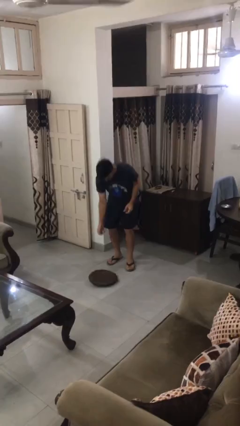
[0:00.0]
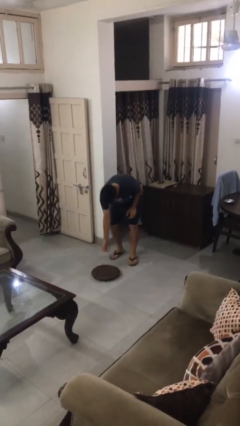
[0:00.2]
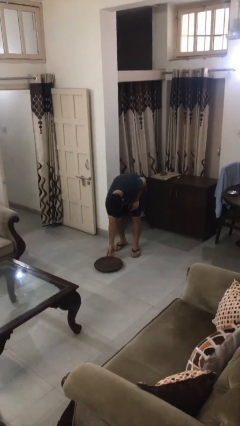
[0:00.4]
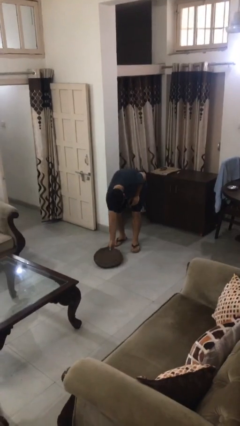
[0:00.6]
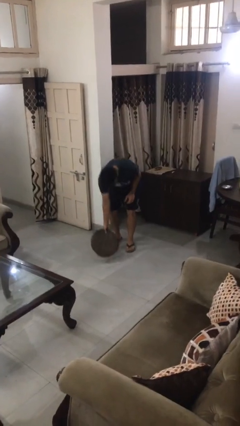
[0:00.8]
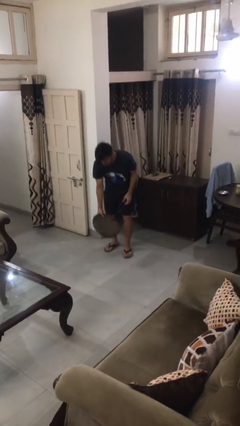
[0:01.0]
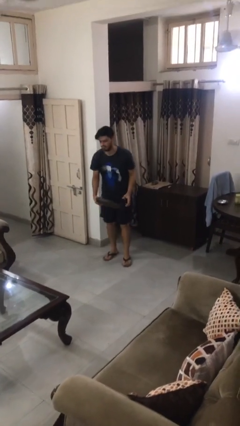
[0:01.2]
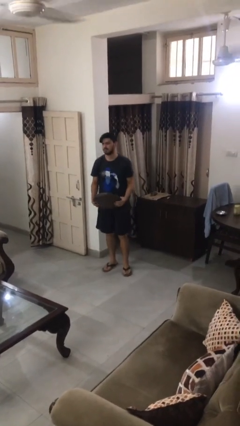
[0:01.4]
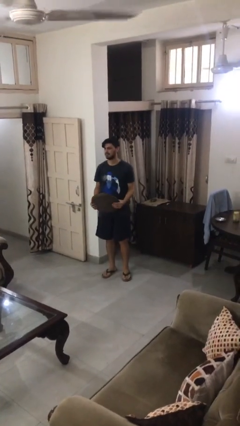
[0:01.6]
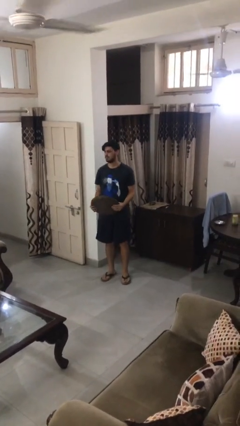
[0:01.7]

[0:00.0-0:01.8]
person picks up object from floor

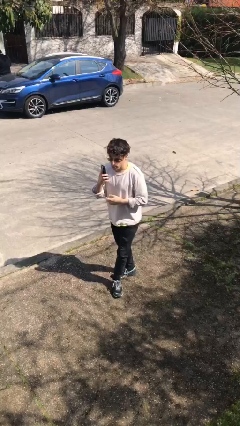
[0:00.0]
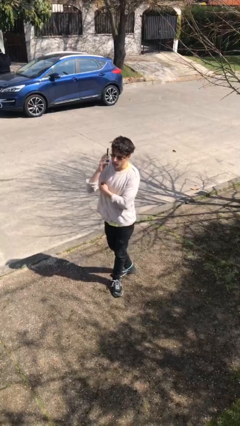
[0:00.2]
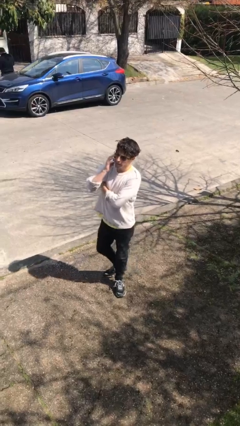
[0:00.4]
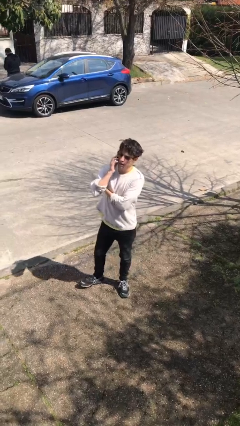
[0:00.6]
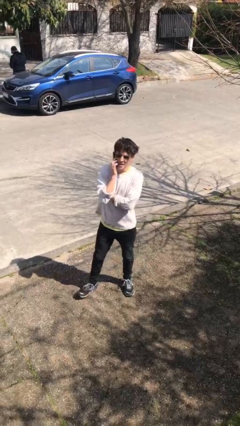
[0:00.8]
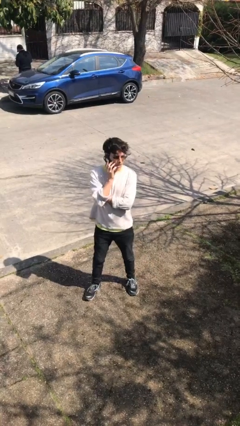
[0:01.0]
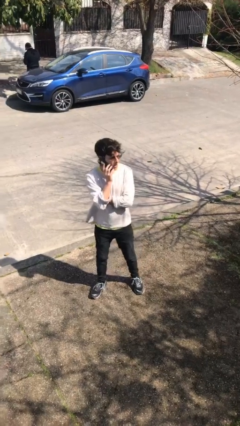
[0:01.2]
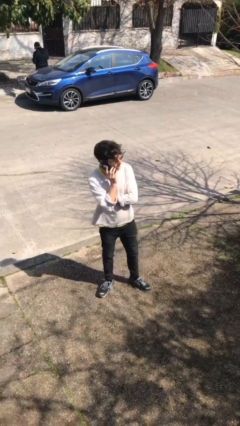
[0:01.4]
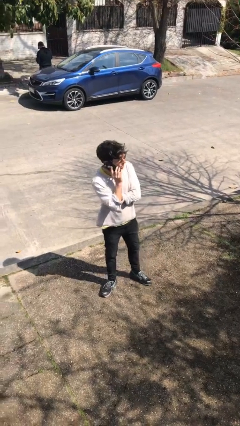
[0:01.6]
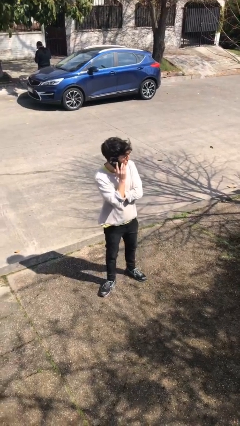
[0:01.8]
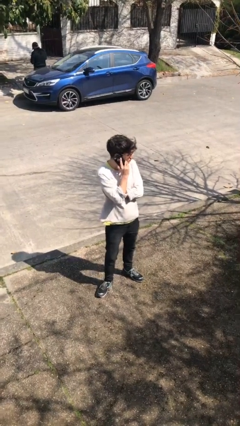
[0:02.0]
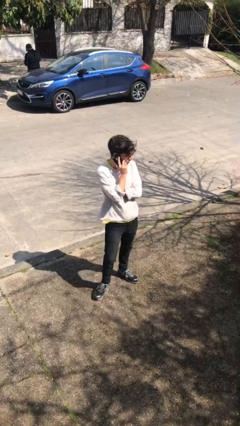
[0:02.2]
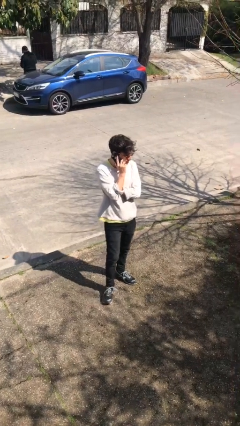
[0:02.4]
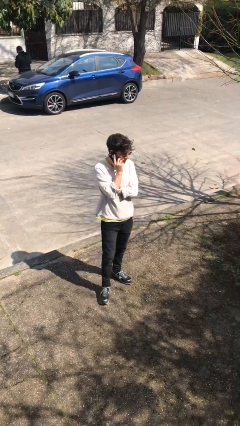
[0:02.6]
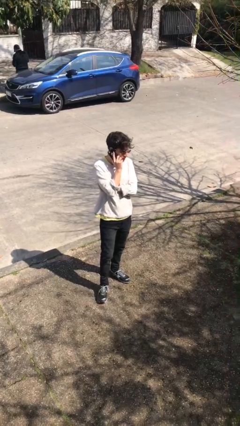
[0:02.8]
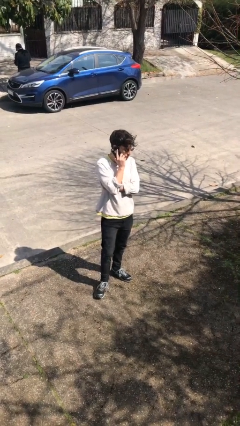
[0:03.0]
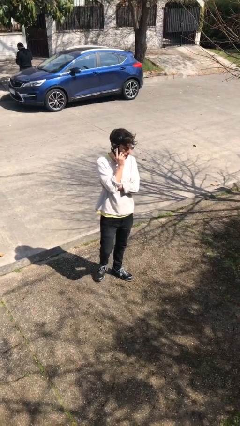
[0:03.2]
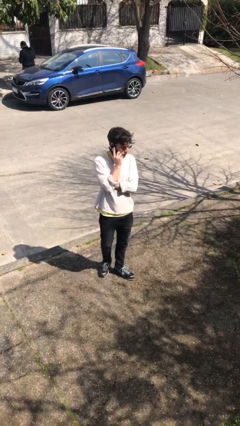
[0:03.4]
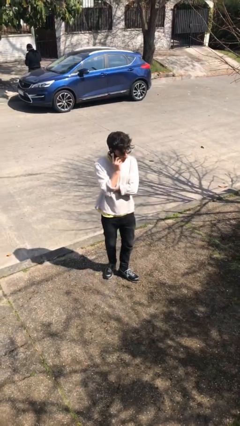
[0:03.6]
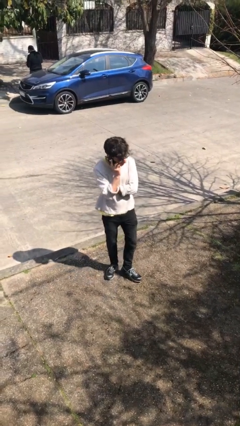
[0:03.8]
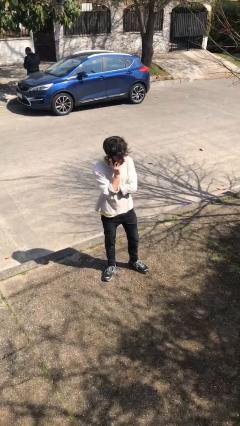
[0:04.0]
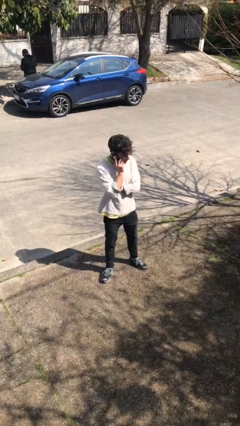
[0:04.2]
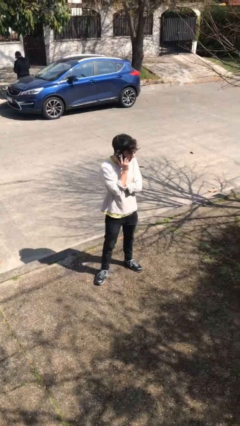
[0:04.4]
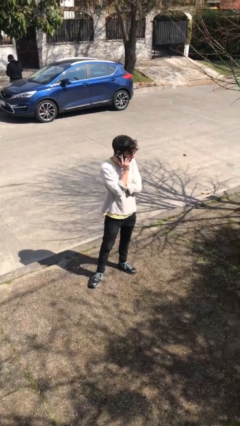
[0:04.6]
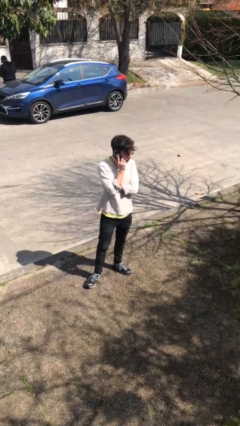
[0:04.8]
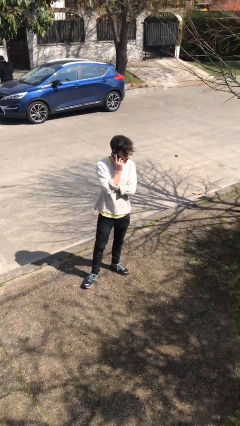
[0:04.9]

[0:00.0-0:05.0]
person talks on phone

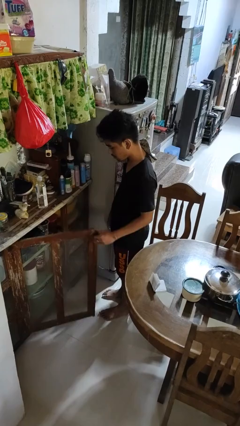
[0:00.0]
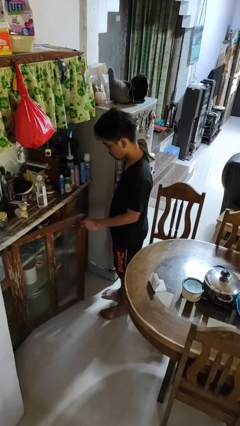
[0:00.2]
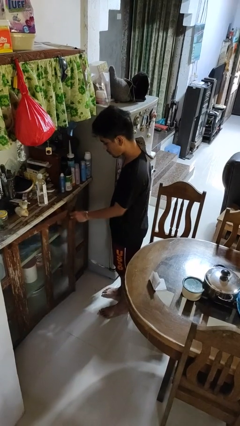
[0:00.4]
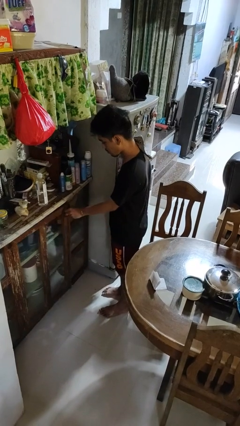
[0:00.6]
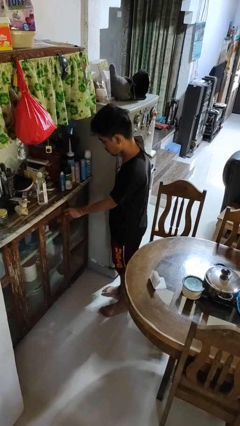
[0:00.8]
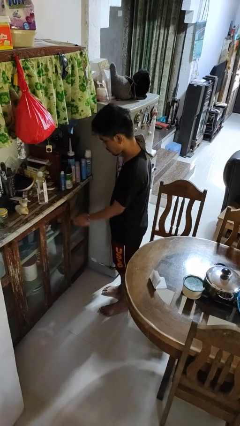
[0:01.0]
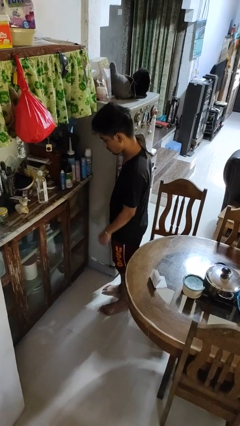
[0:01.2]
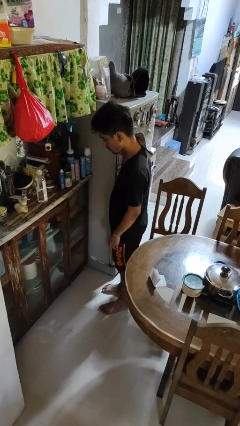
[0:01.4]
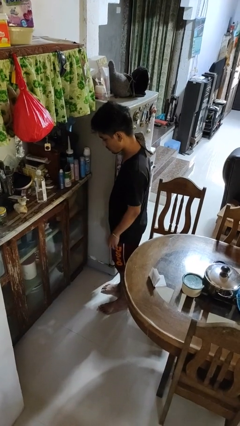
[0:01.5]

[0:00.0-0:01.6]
person closes cabinet

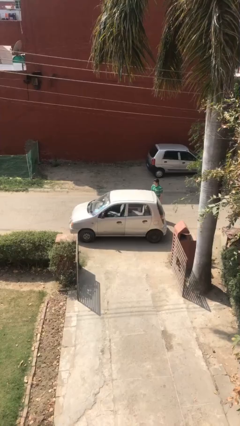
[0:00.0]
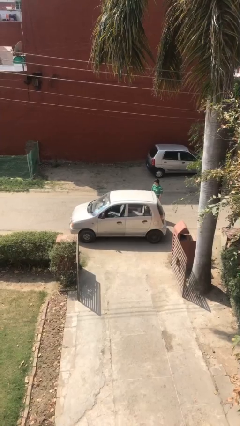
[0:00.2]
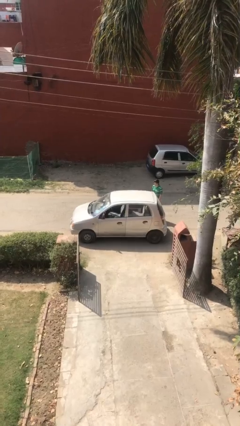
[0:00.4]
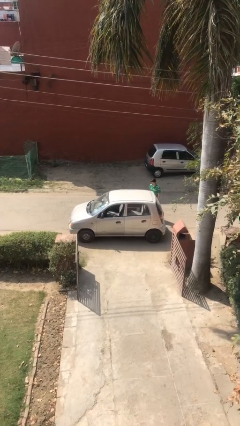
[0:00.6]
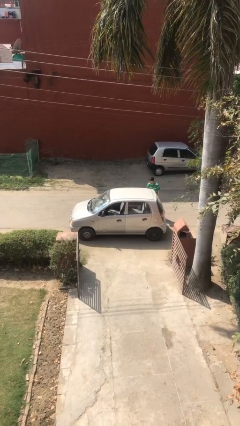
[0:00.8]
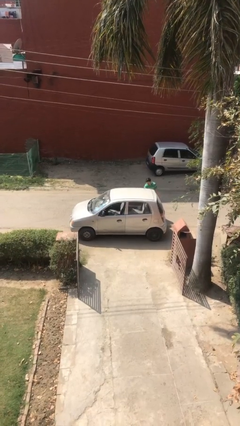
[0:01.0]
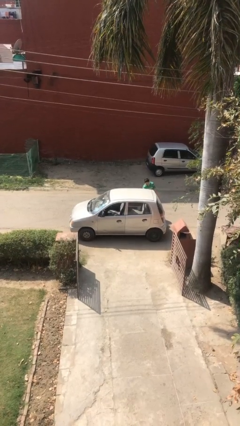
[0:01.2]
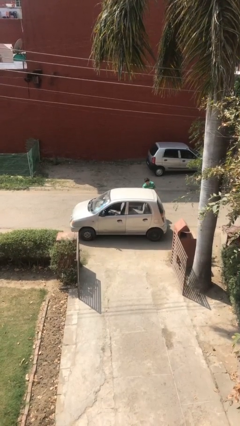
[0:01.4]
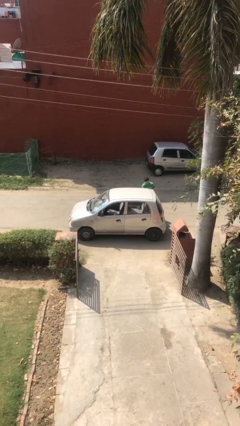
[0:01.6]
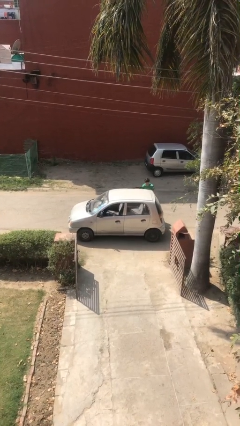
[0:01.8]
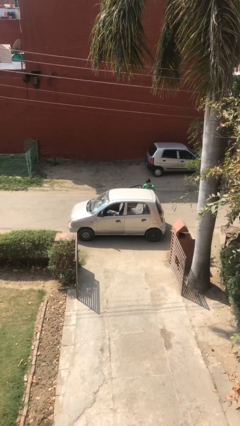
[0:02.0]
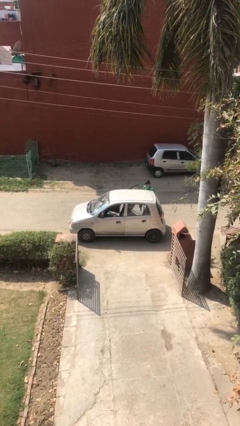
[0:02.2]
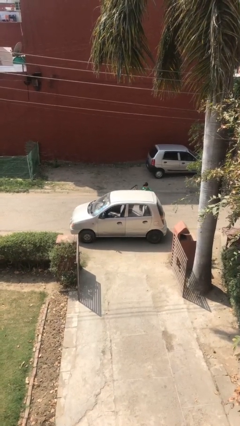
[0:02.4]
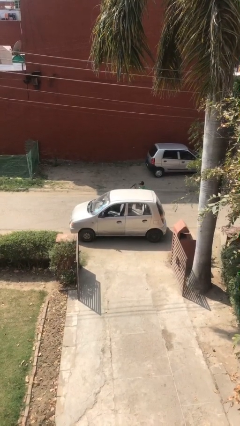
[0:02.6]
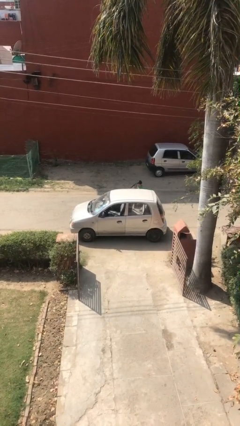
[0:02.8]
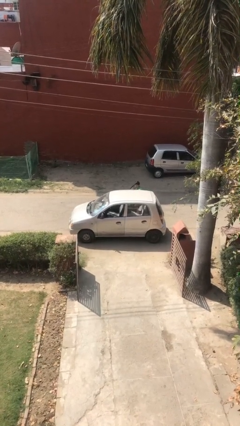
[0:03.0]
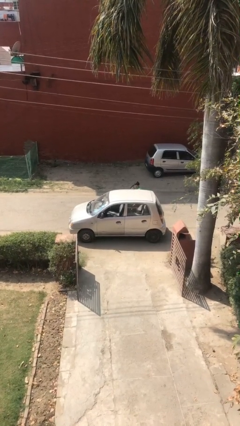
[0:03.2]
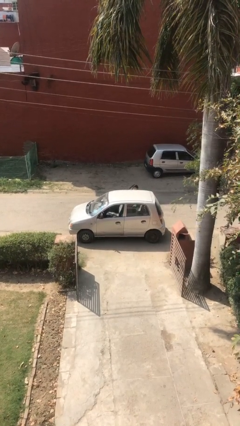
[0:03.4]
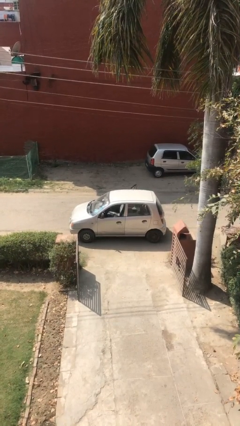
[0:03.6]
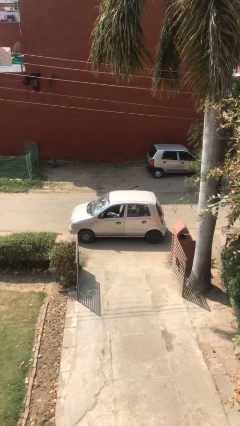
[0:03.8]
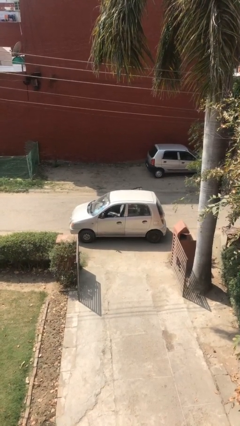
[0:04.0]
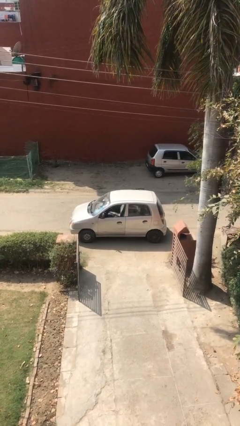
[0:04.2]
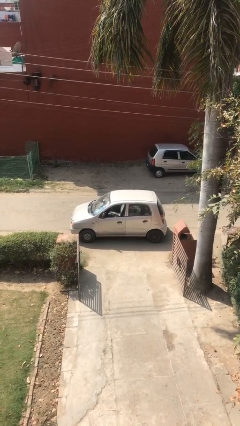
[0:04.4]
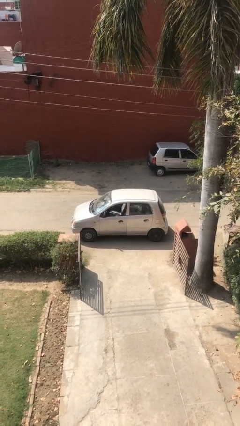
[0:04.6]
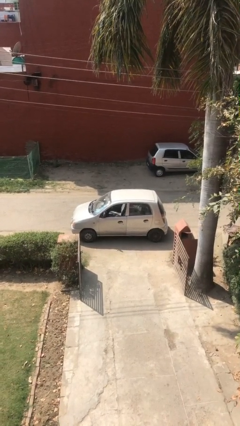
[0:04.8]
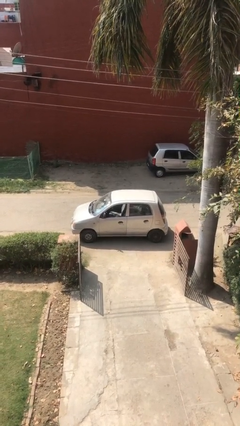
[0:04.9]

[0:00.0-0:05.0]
car picks up person

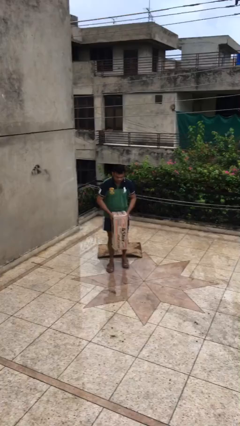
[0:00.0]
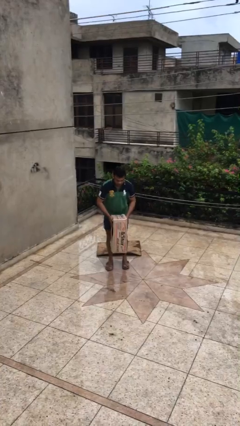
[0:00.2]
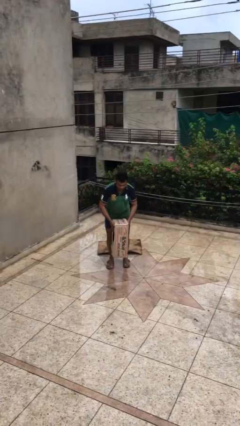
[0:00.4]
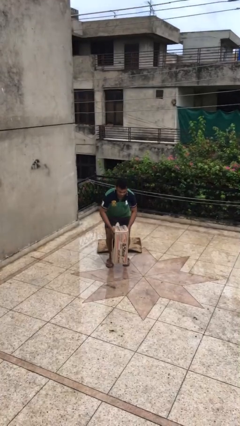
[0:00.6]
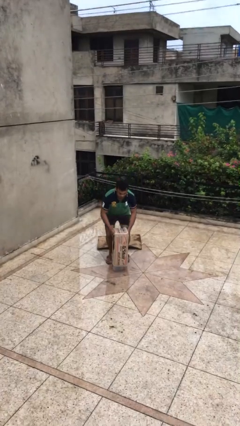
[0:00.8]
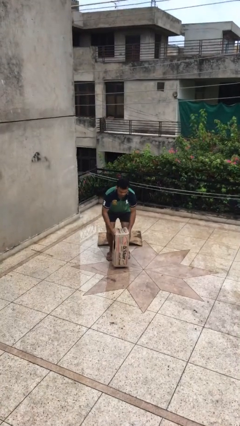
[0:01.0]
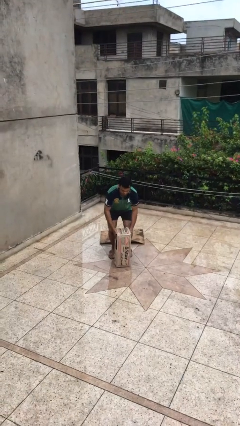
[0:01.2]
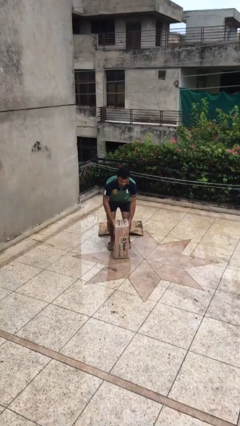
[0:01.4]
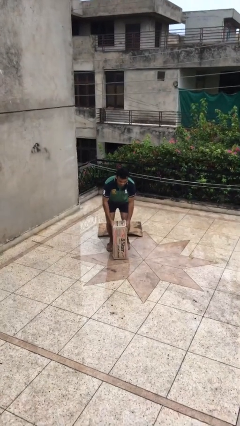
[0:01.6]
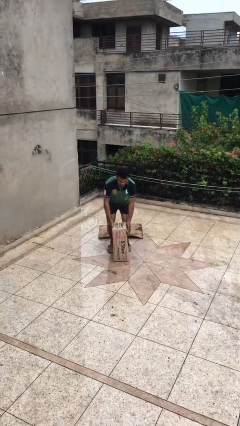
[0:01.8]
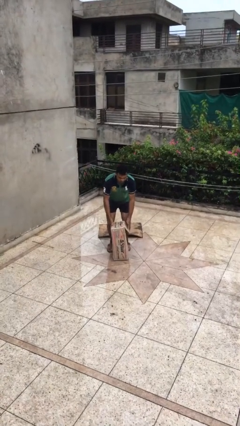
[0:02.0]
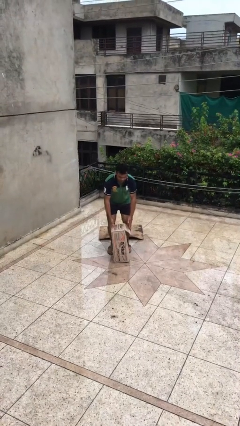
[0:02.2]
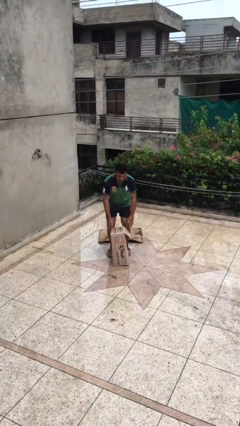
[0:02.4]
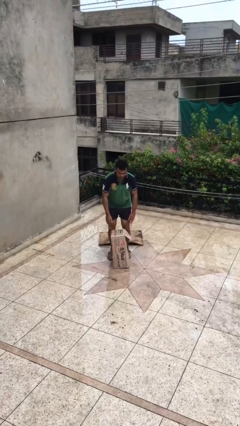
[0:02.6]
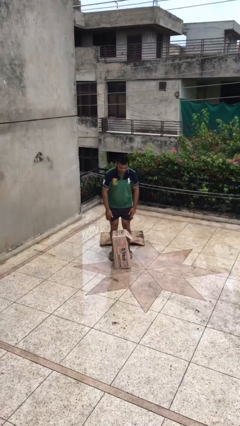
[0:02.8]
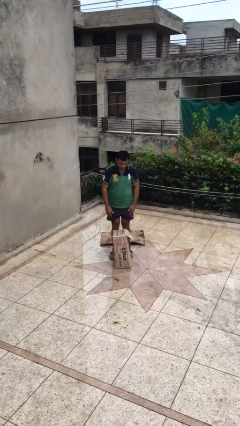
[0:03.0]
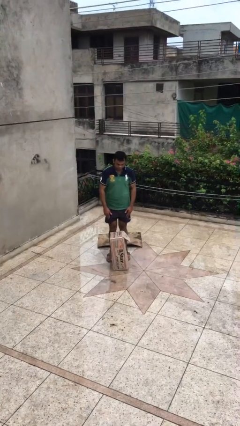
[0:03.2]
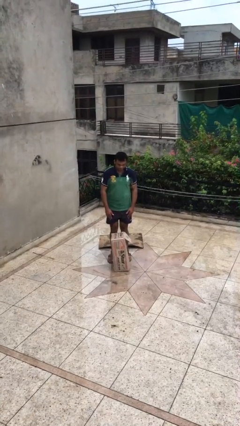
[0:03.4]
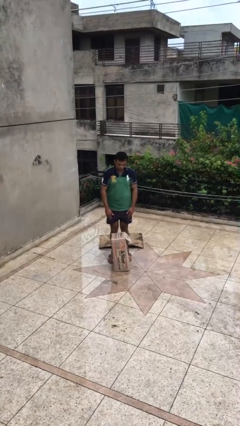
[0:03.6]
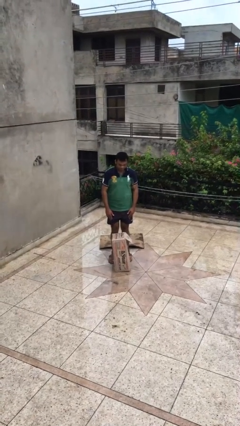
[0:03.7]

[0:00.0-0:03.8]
person puts down object on floor
